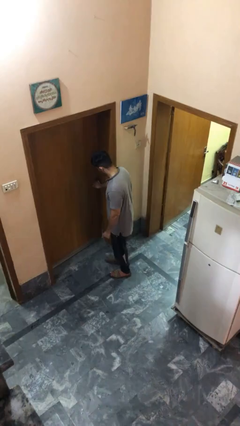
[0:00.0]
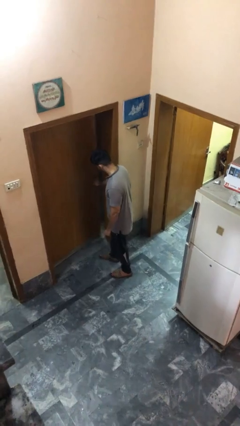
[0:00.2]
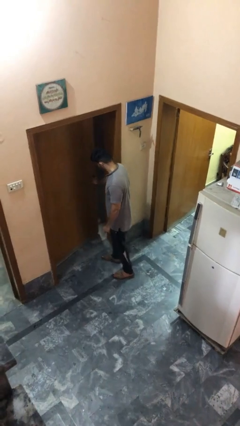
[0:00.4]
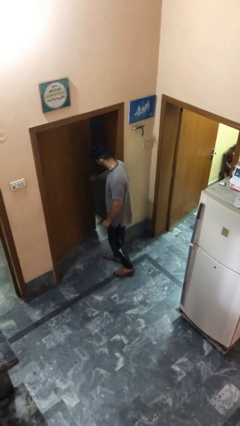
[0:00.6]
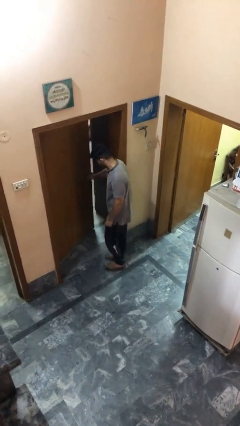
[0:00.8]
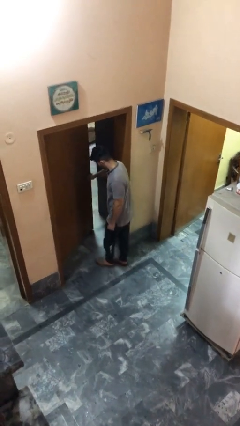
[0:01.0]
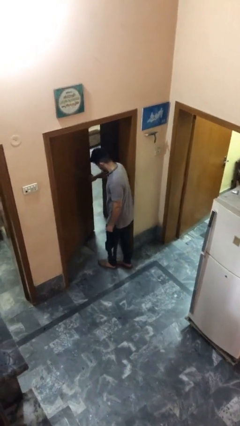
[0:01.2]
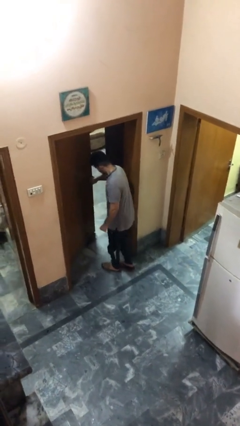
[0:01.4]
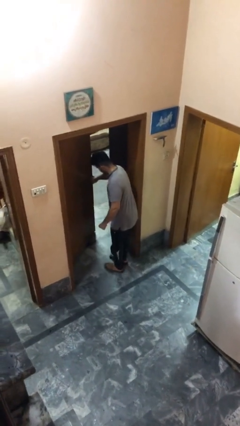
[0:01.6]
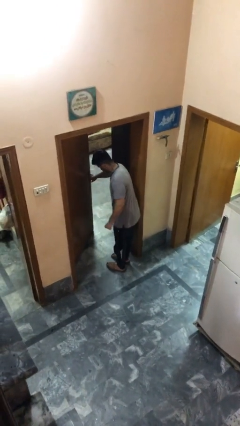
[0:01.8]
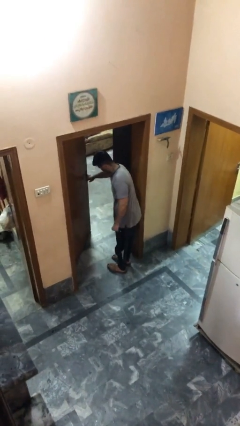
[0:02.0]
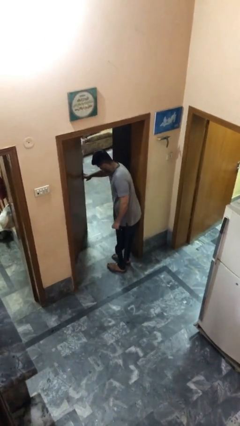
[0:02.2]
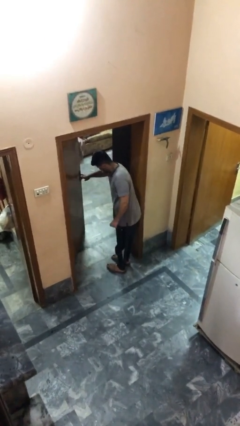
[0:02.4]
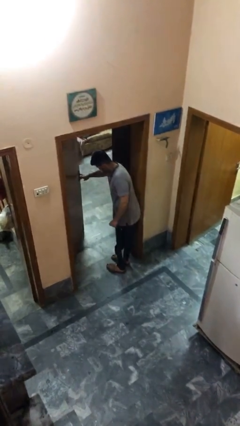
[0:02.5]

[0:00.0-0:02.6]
person opens facility door

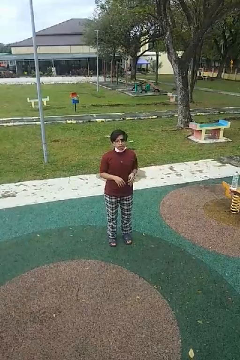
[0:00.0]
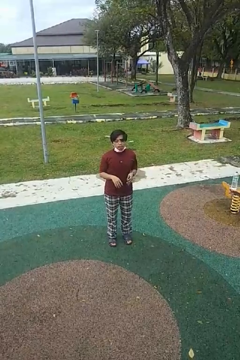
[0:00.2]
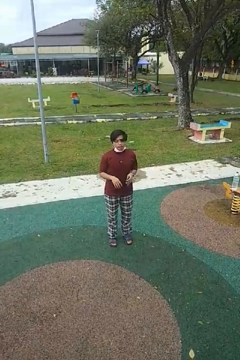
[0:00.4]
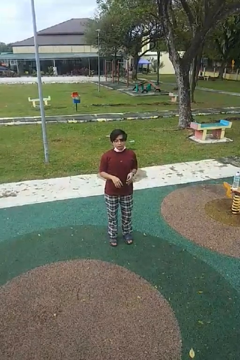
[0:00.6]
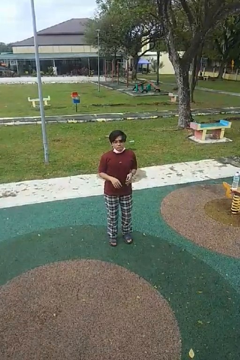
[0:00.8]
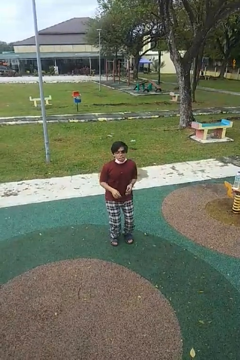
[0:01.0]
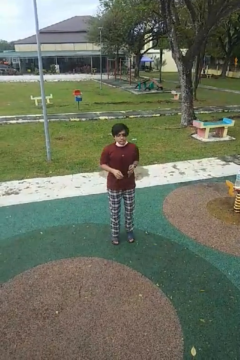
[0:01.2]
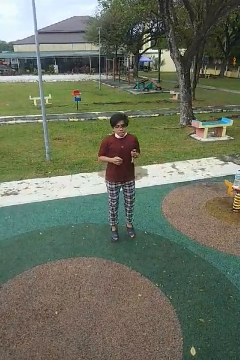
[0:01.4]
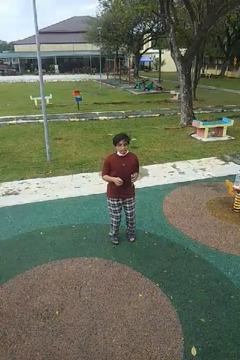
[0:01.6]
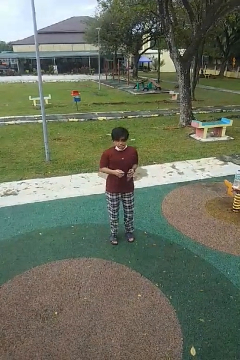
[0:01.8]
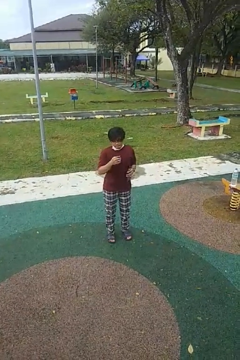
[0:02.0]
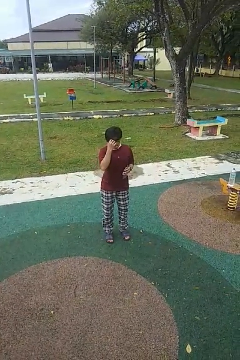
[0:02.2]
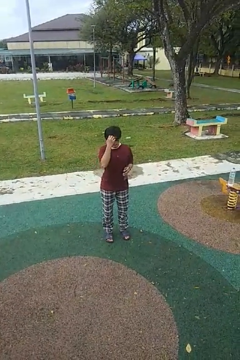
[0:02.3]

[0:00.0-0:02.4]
person jumps

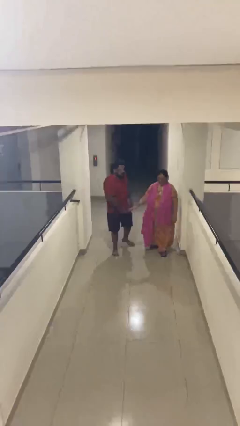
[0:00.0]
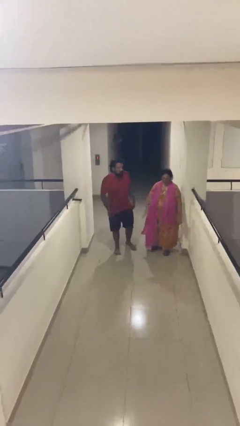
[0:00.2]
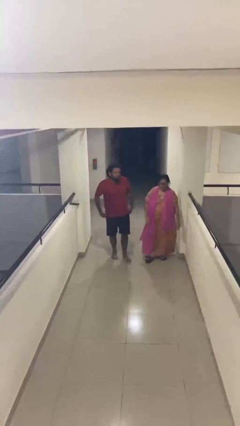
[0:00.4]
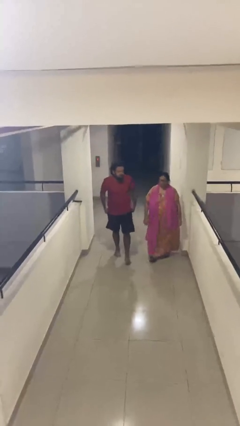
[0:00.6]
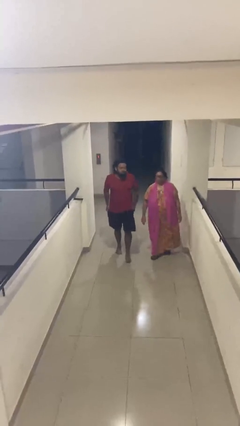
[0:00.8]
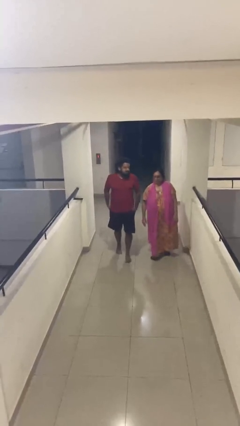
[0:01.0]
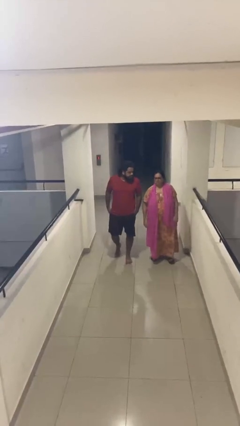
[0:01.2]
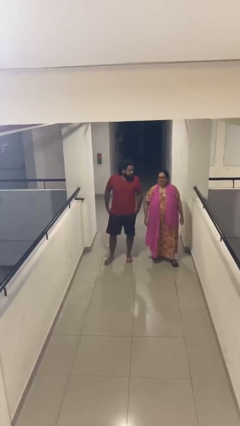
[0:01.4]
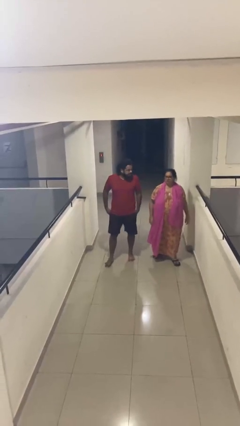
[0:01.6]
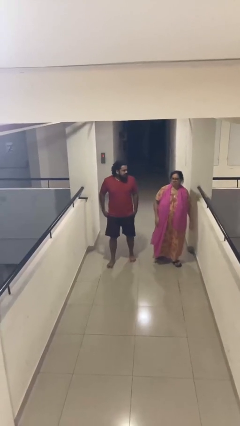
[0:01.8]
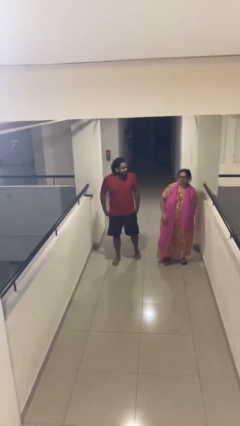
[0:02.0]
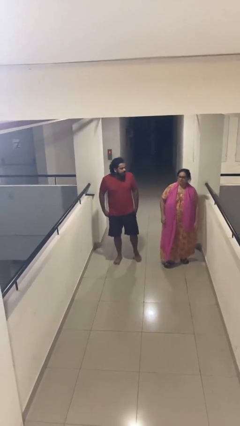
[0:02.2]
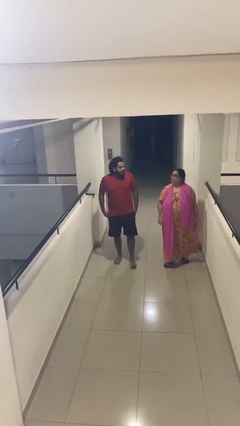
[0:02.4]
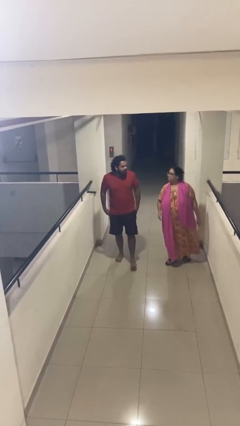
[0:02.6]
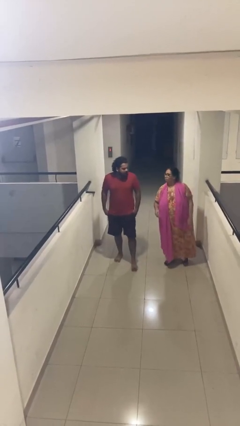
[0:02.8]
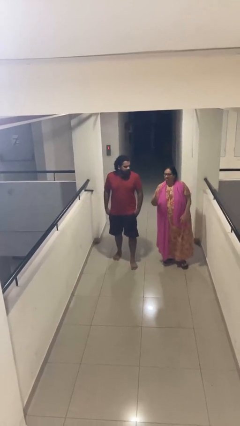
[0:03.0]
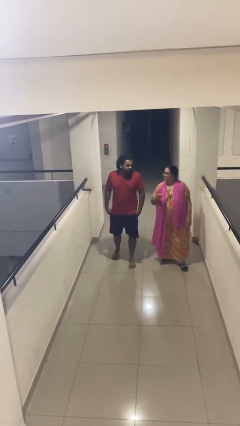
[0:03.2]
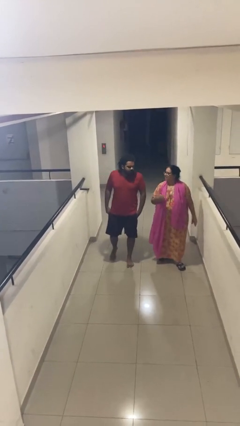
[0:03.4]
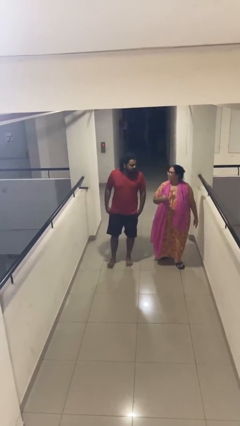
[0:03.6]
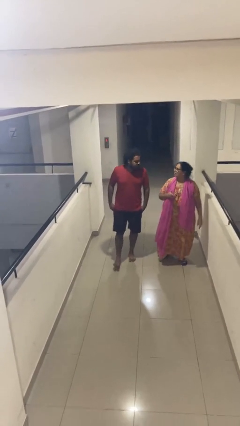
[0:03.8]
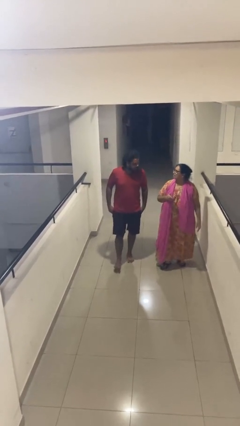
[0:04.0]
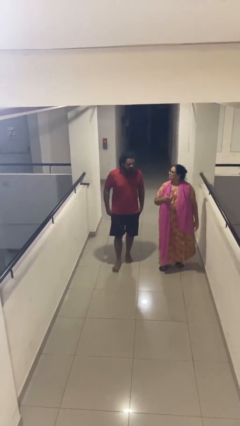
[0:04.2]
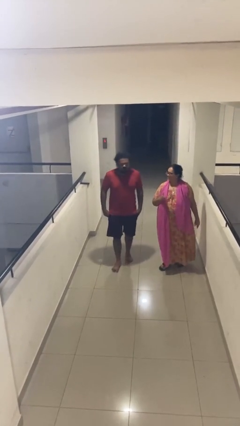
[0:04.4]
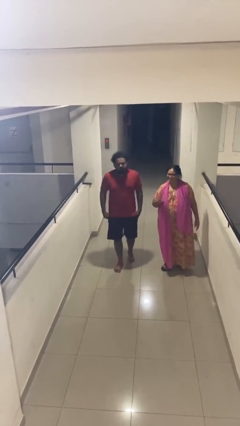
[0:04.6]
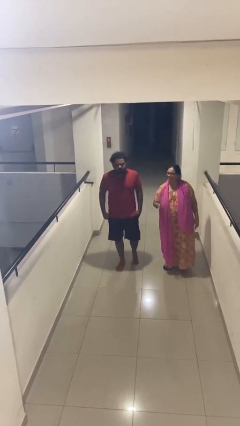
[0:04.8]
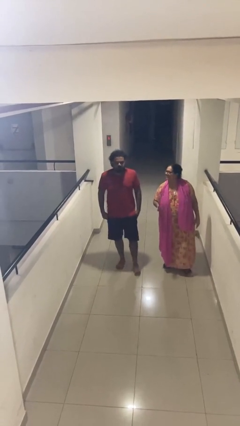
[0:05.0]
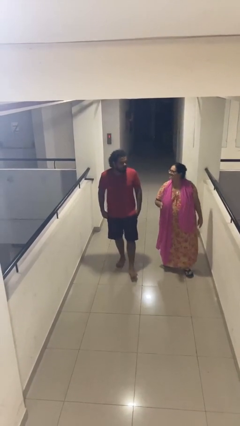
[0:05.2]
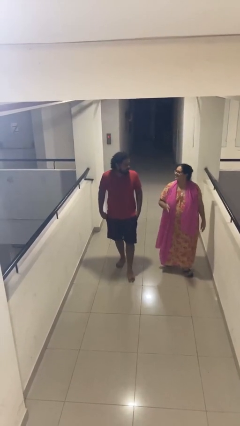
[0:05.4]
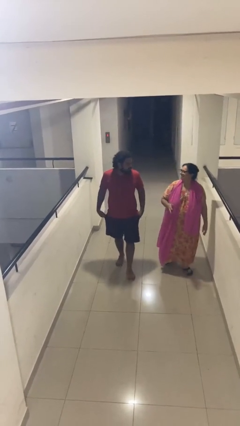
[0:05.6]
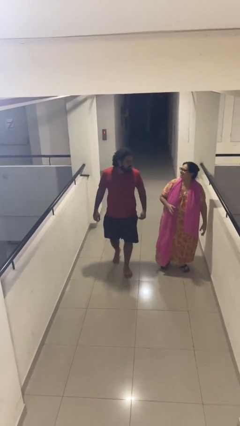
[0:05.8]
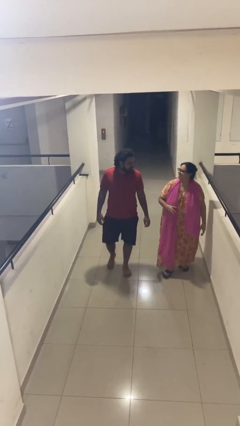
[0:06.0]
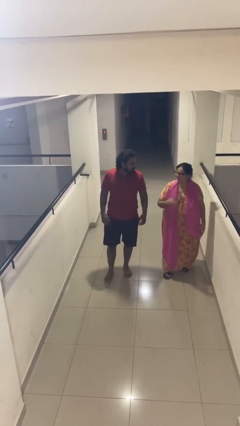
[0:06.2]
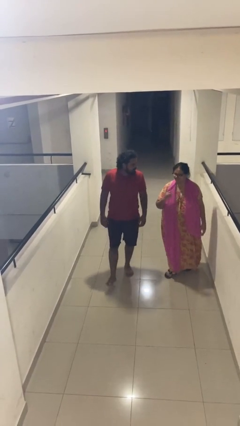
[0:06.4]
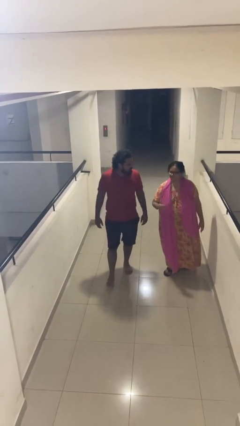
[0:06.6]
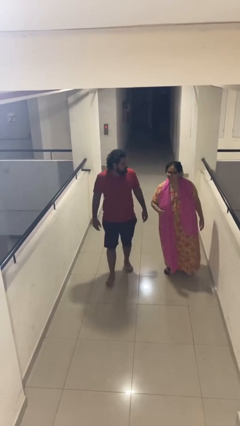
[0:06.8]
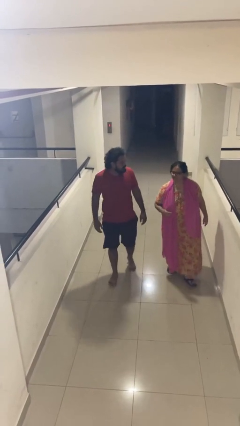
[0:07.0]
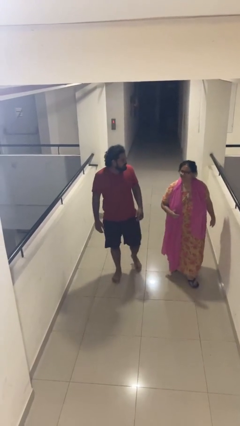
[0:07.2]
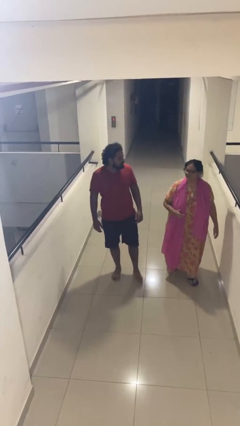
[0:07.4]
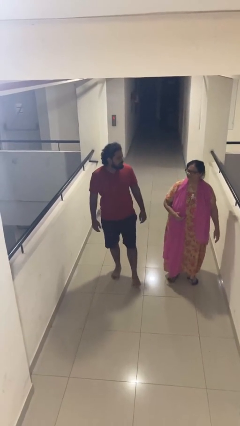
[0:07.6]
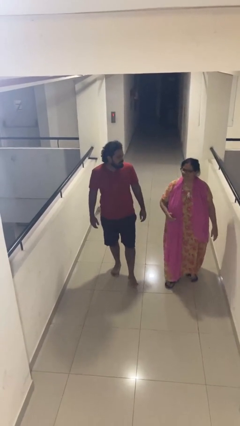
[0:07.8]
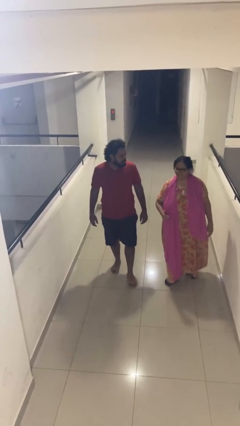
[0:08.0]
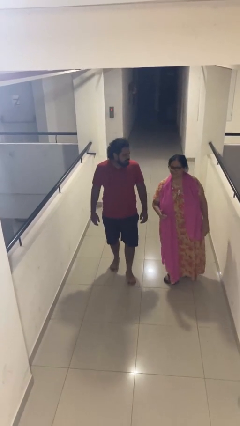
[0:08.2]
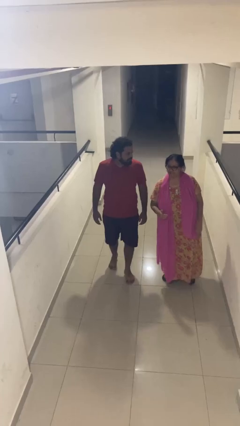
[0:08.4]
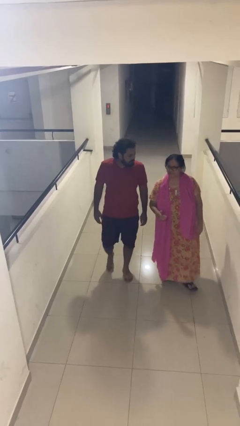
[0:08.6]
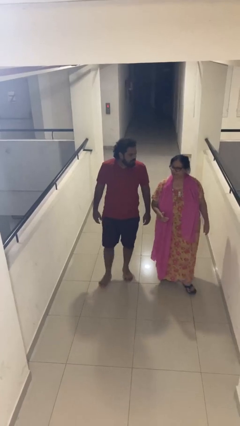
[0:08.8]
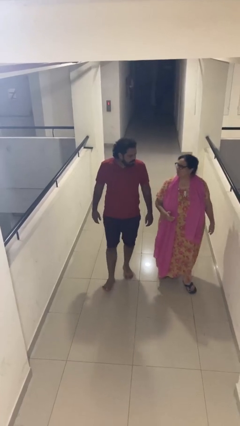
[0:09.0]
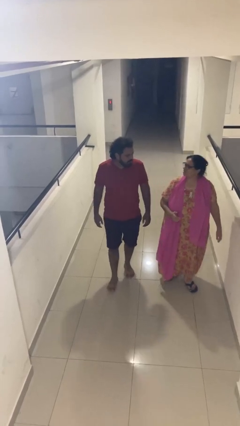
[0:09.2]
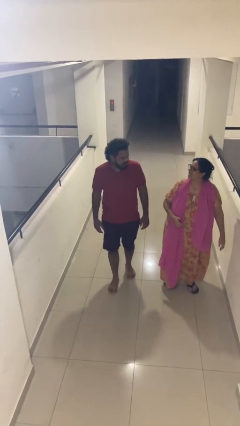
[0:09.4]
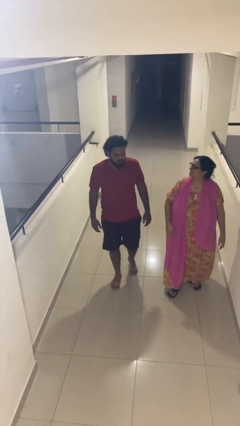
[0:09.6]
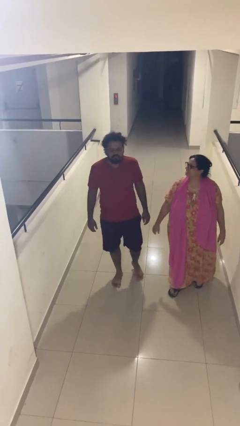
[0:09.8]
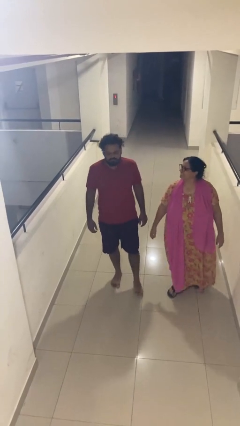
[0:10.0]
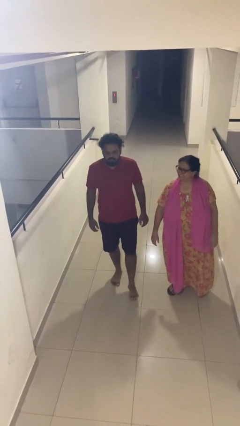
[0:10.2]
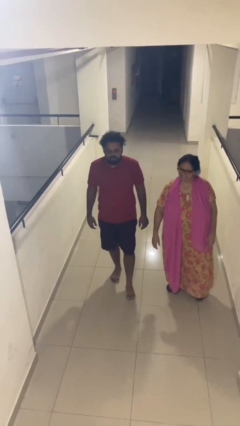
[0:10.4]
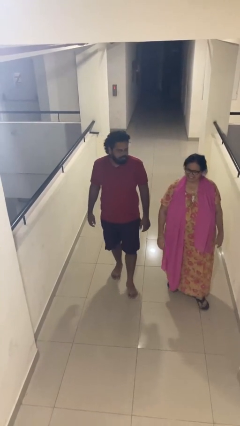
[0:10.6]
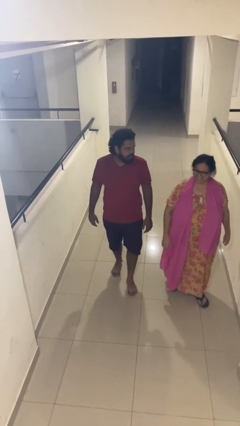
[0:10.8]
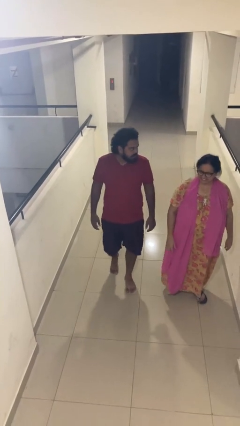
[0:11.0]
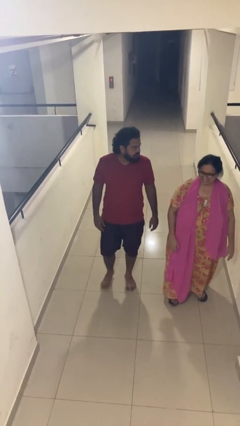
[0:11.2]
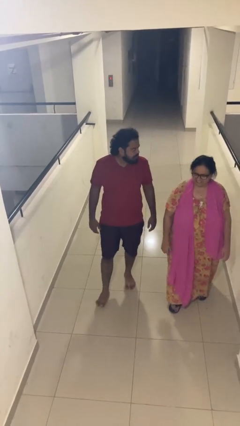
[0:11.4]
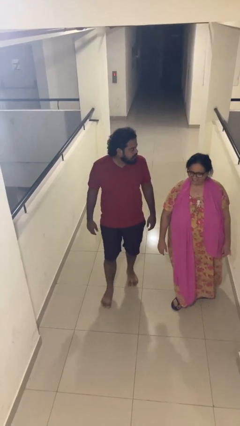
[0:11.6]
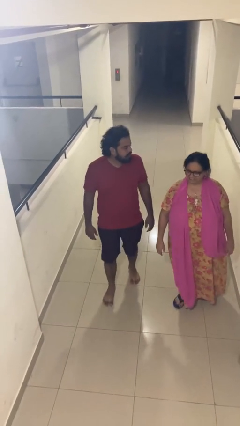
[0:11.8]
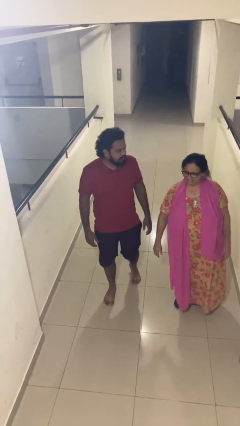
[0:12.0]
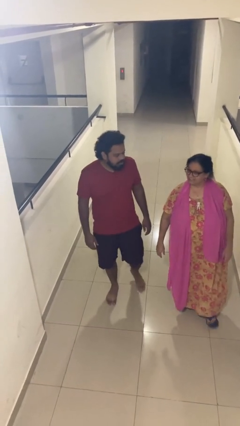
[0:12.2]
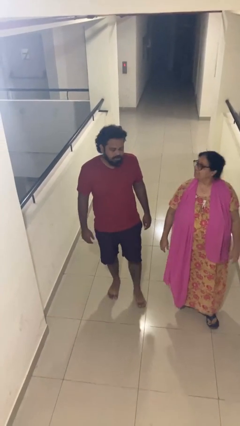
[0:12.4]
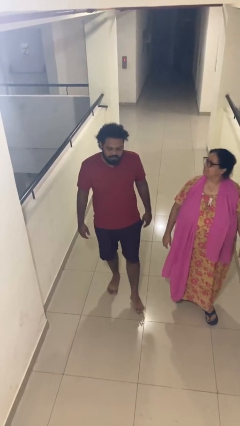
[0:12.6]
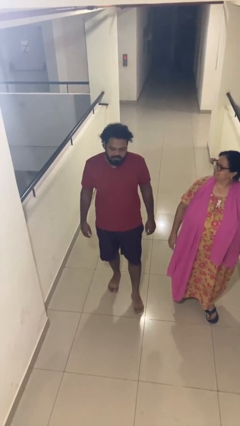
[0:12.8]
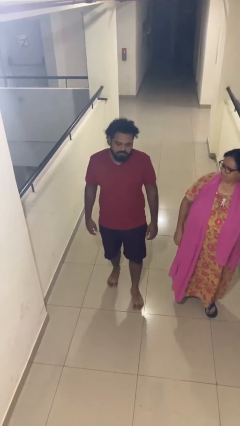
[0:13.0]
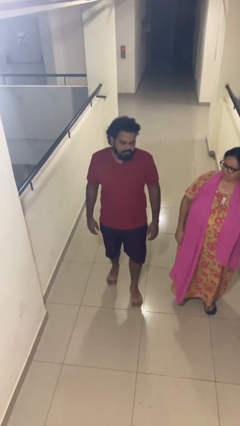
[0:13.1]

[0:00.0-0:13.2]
person talks to person
